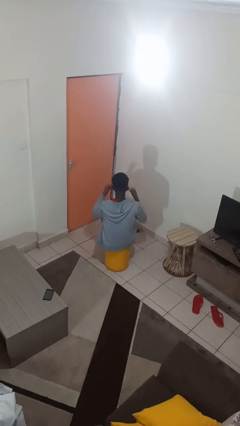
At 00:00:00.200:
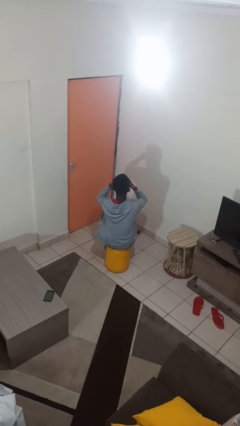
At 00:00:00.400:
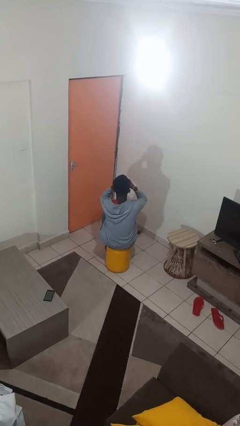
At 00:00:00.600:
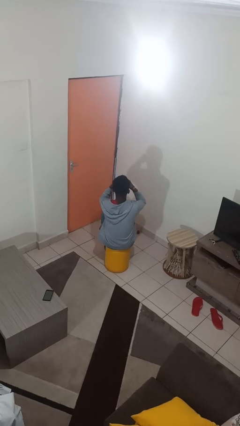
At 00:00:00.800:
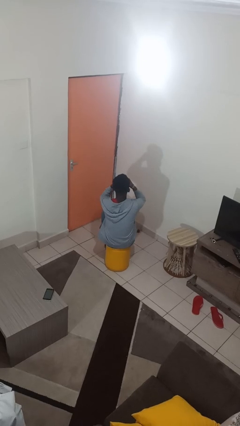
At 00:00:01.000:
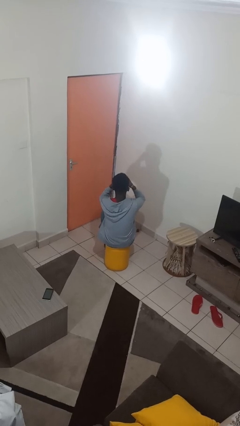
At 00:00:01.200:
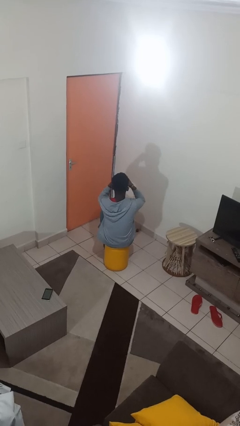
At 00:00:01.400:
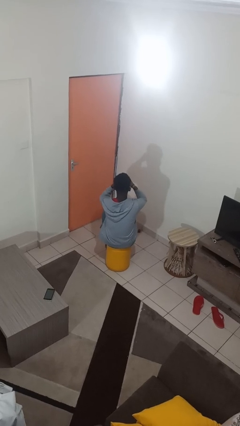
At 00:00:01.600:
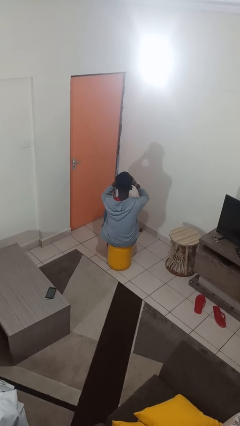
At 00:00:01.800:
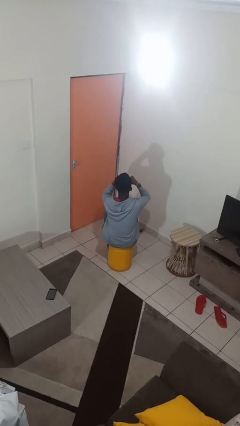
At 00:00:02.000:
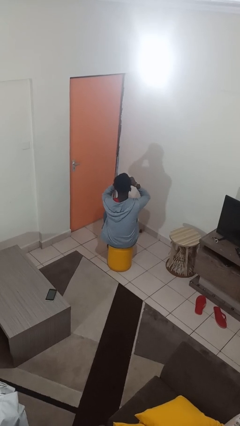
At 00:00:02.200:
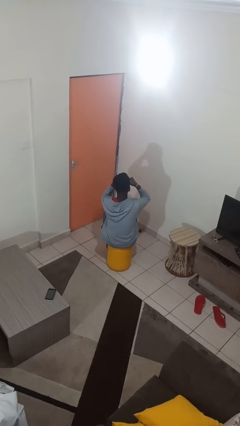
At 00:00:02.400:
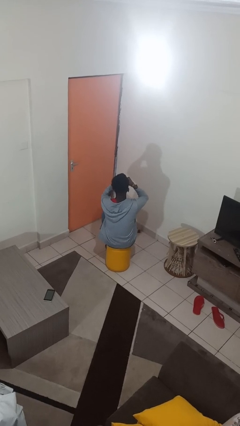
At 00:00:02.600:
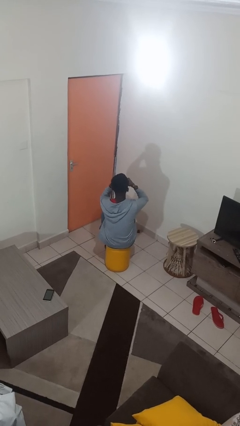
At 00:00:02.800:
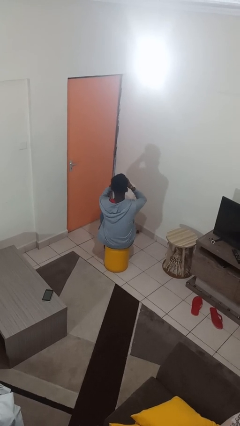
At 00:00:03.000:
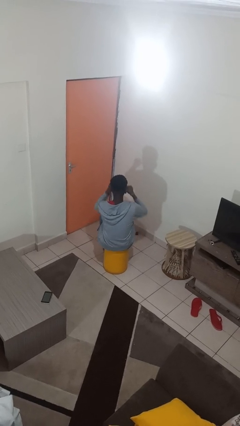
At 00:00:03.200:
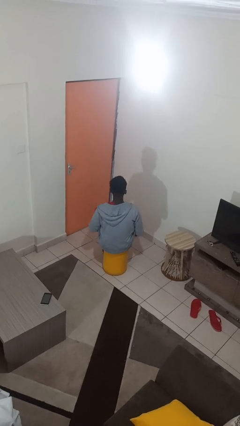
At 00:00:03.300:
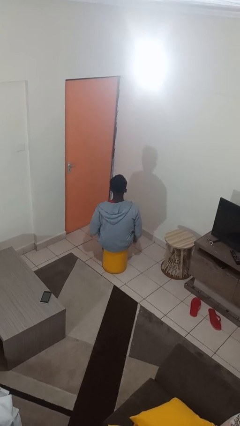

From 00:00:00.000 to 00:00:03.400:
person rubs eyes

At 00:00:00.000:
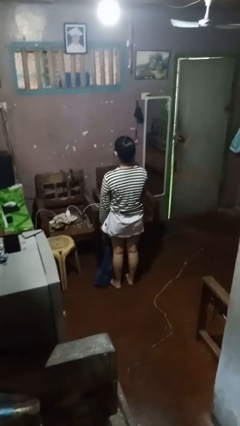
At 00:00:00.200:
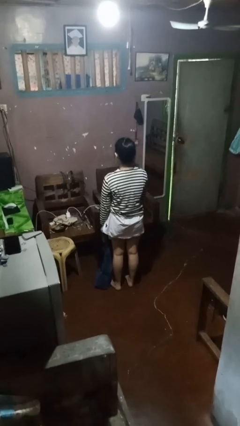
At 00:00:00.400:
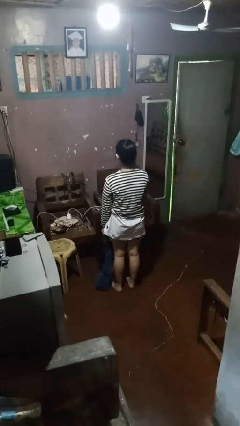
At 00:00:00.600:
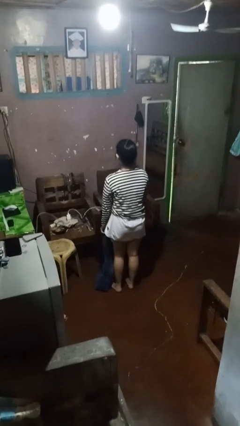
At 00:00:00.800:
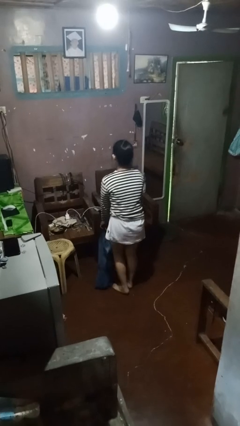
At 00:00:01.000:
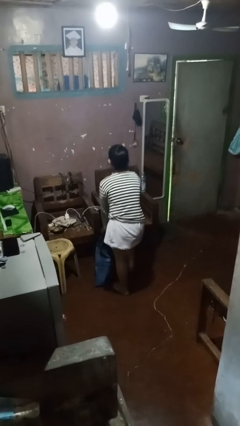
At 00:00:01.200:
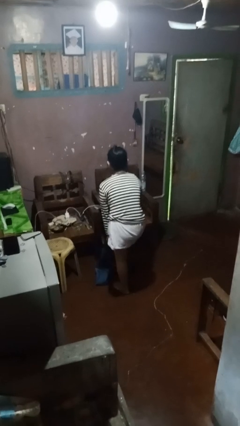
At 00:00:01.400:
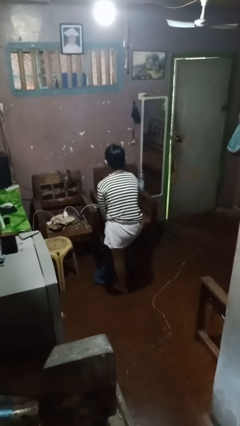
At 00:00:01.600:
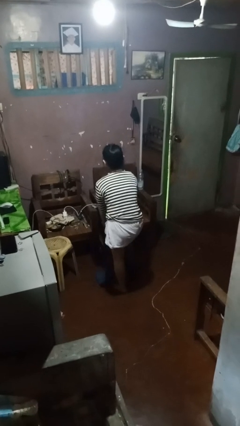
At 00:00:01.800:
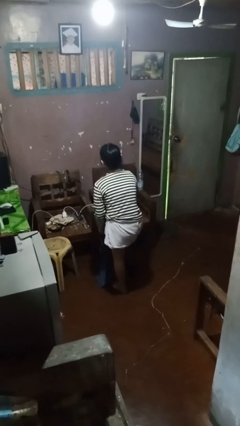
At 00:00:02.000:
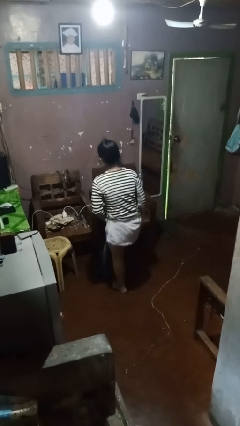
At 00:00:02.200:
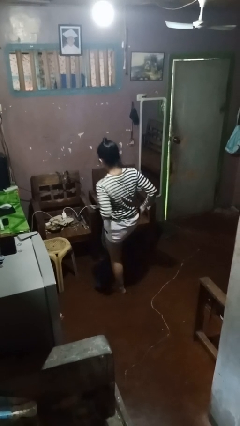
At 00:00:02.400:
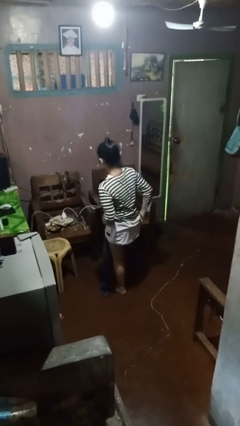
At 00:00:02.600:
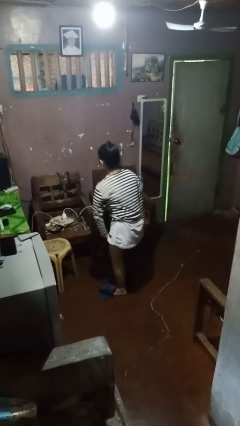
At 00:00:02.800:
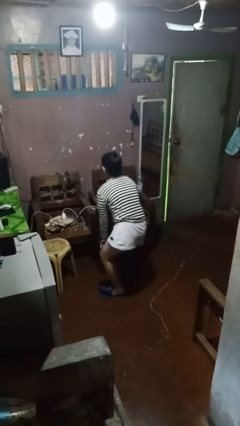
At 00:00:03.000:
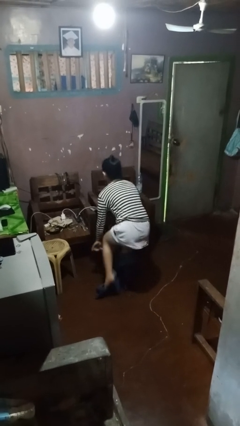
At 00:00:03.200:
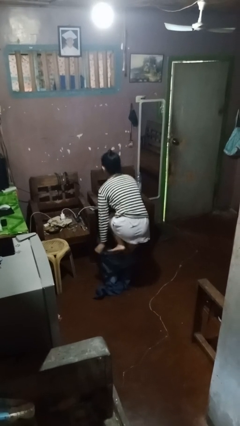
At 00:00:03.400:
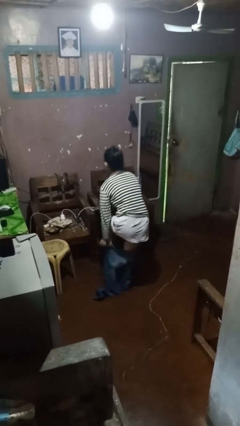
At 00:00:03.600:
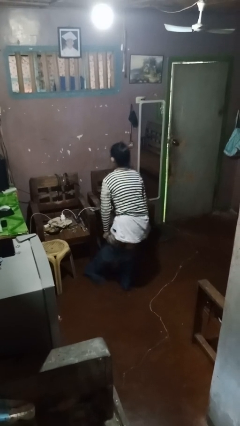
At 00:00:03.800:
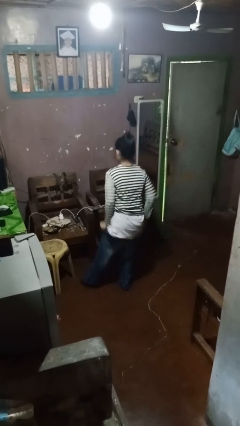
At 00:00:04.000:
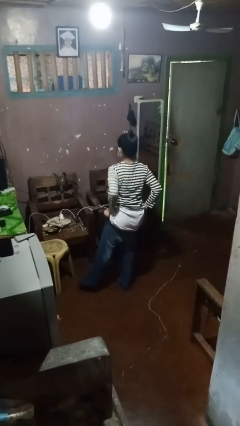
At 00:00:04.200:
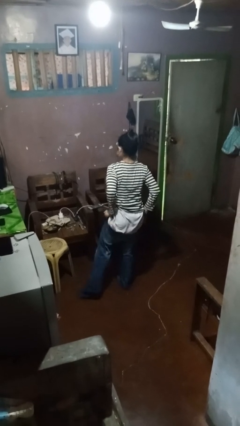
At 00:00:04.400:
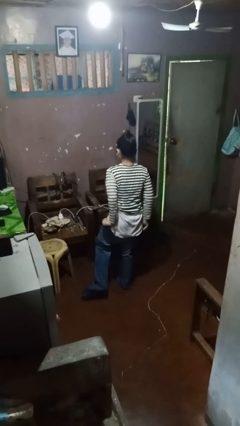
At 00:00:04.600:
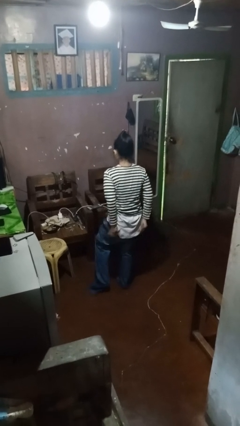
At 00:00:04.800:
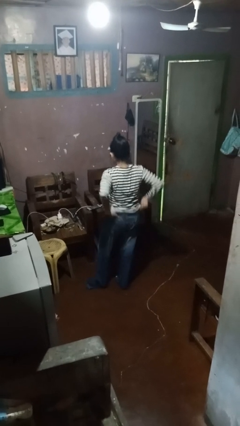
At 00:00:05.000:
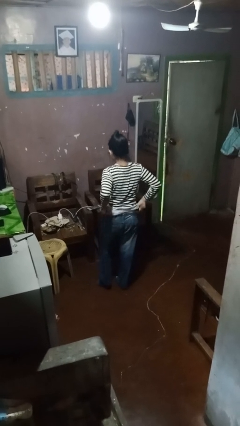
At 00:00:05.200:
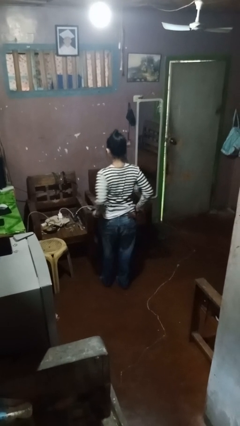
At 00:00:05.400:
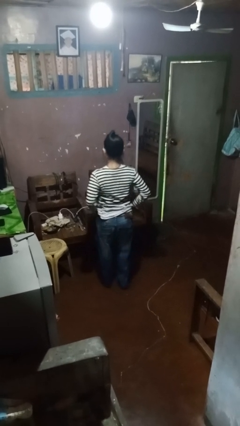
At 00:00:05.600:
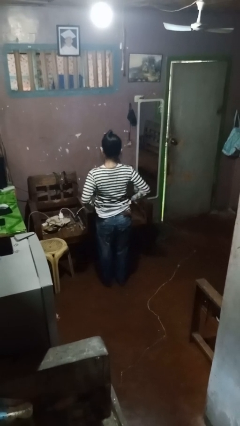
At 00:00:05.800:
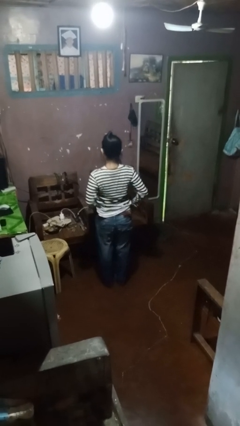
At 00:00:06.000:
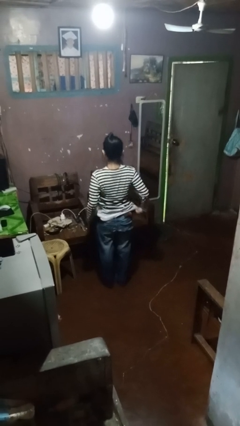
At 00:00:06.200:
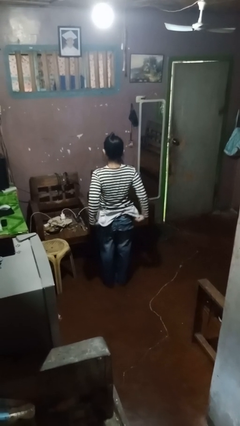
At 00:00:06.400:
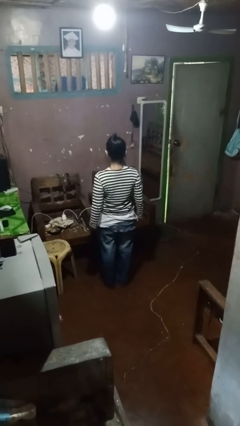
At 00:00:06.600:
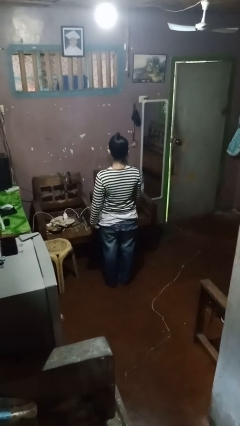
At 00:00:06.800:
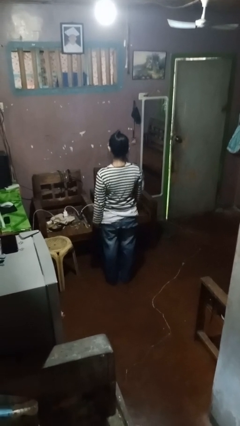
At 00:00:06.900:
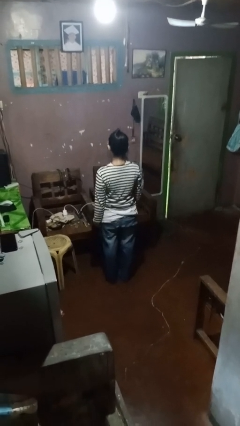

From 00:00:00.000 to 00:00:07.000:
person puts on pants

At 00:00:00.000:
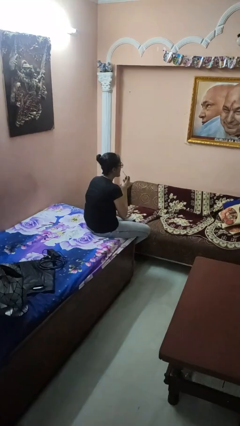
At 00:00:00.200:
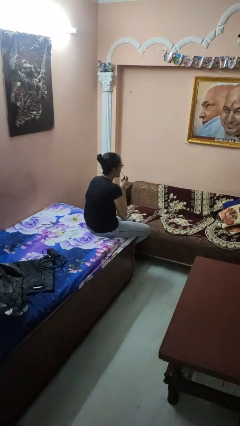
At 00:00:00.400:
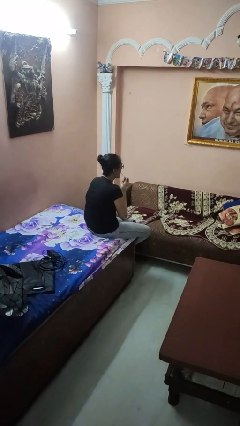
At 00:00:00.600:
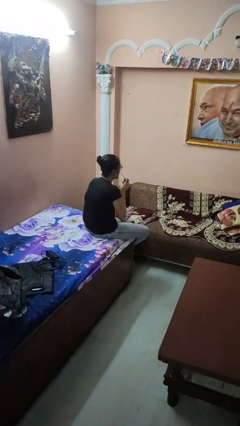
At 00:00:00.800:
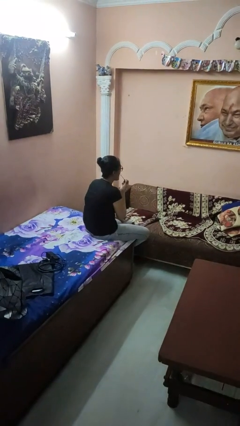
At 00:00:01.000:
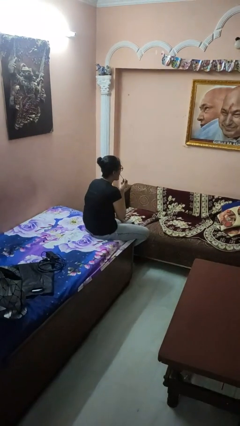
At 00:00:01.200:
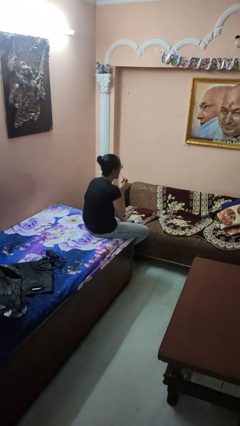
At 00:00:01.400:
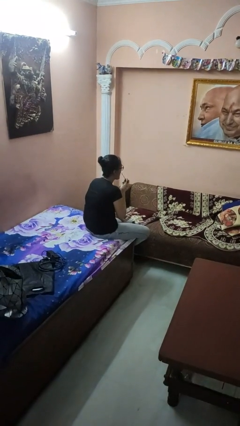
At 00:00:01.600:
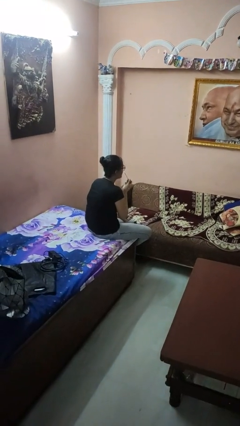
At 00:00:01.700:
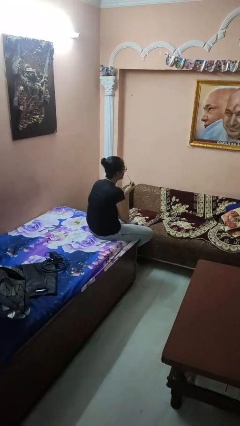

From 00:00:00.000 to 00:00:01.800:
person applies lip makeup

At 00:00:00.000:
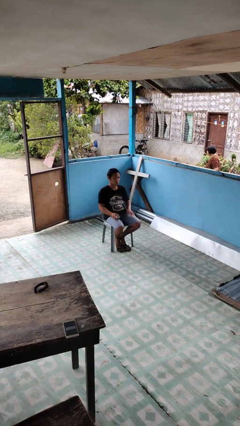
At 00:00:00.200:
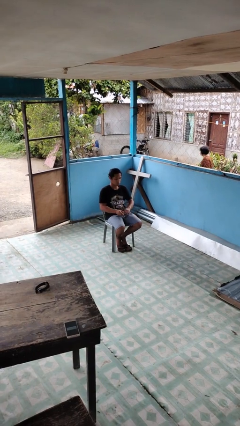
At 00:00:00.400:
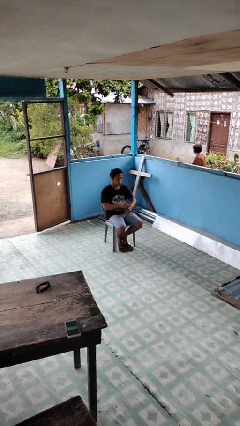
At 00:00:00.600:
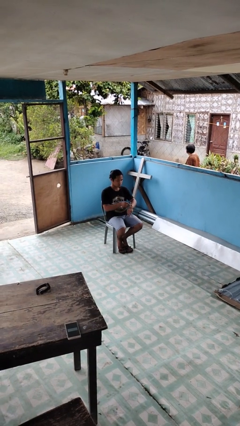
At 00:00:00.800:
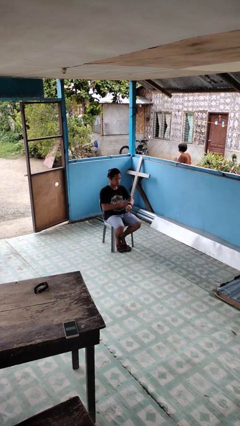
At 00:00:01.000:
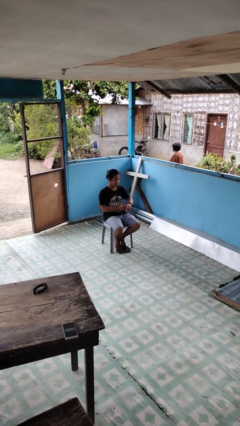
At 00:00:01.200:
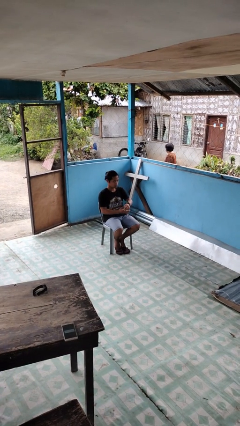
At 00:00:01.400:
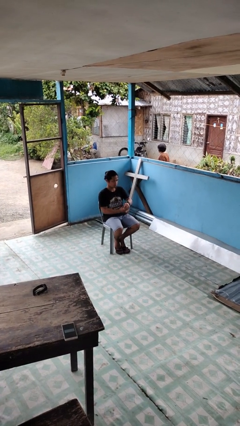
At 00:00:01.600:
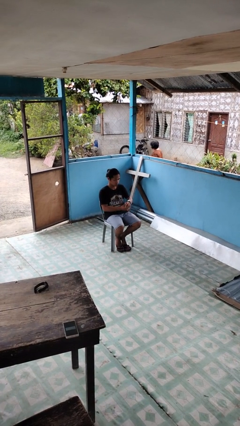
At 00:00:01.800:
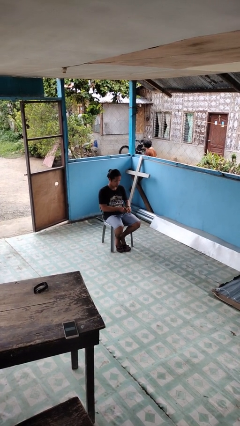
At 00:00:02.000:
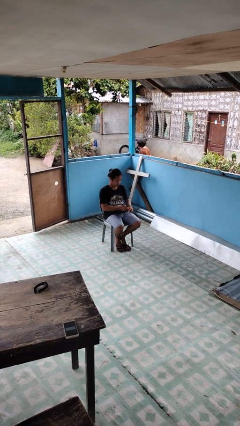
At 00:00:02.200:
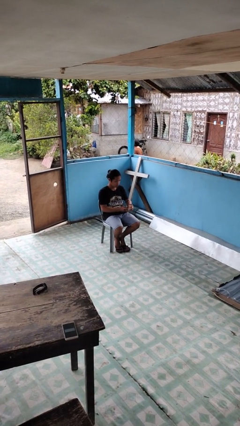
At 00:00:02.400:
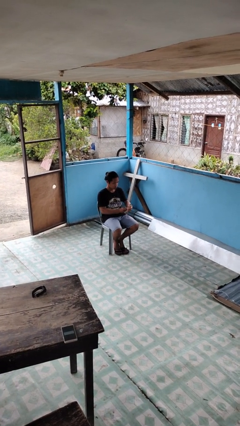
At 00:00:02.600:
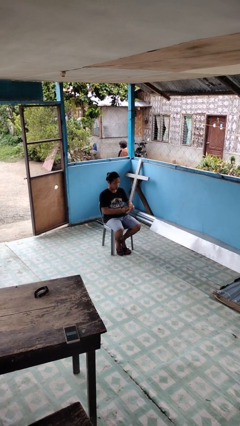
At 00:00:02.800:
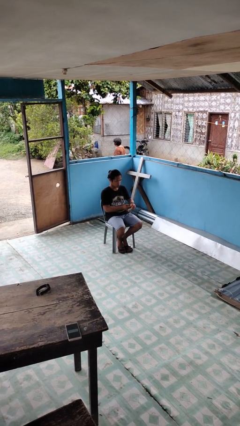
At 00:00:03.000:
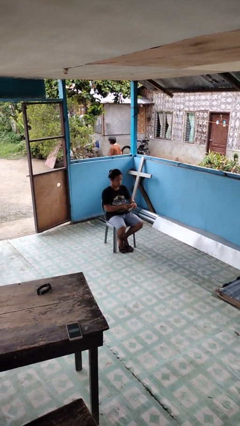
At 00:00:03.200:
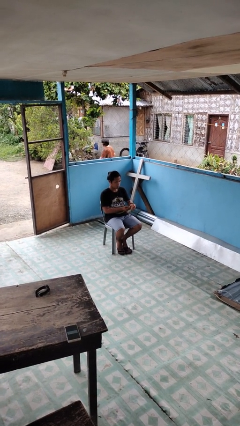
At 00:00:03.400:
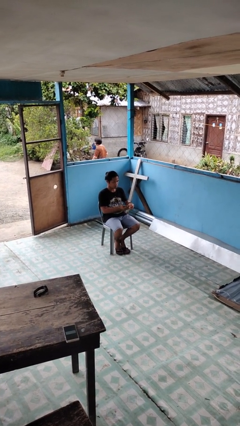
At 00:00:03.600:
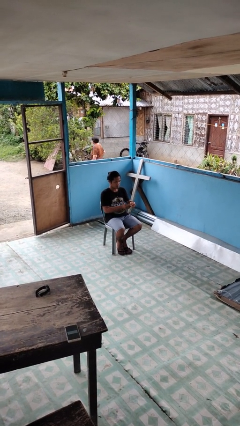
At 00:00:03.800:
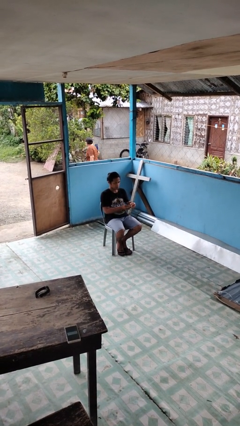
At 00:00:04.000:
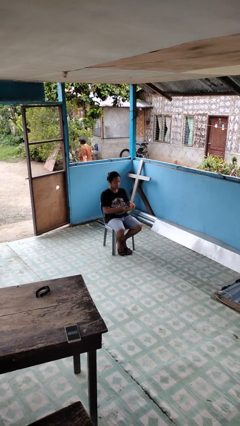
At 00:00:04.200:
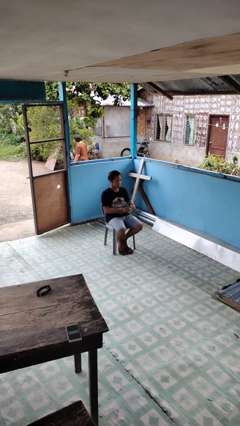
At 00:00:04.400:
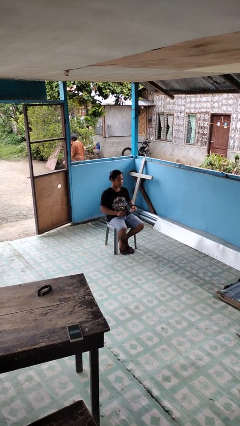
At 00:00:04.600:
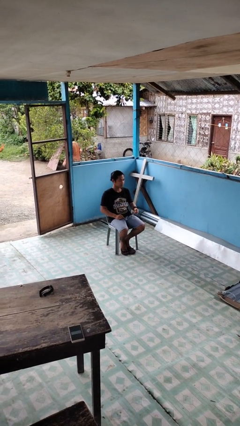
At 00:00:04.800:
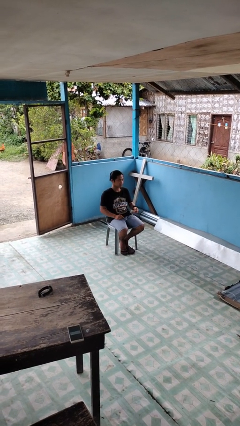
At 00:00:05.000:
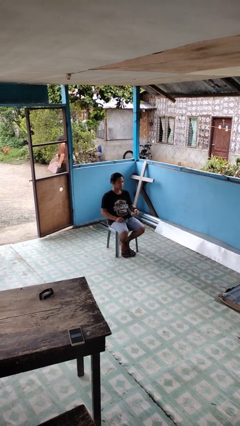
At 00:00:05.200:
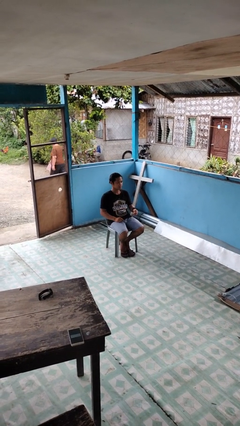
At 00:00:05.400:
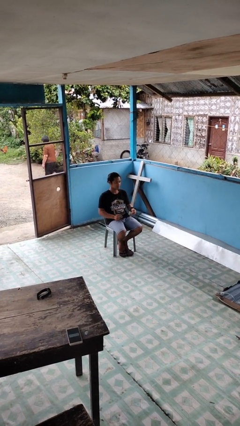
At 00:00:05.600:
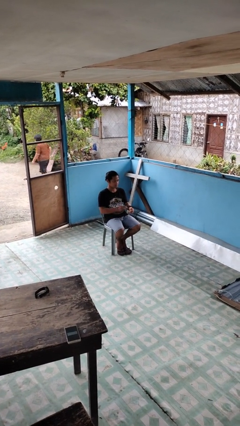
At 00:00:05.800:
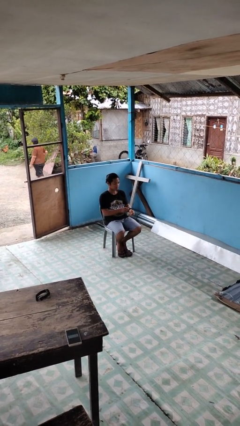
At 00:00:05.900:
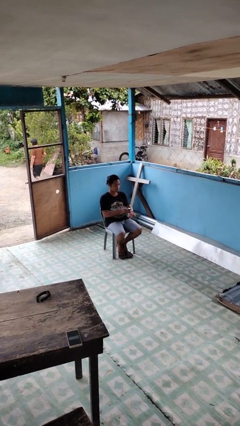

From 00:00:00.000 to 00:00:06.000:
person puts on wristwatch
